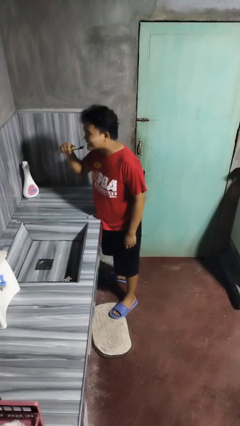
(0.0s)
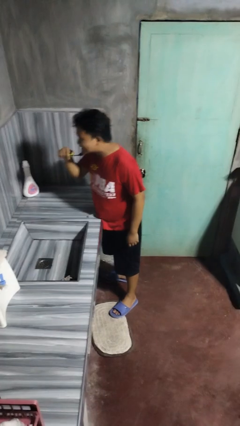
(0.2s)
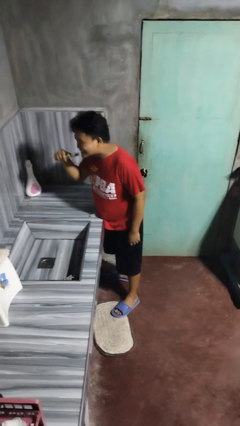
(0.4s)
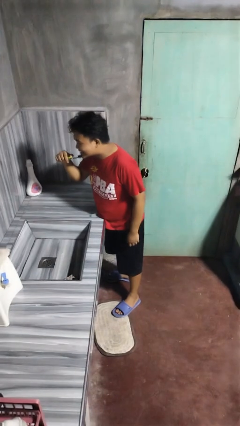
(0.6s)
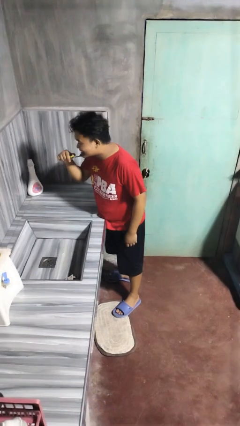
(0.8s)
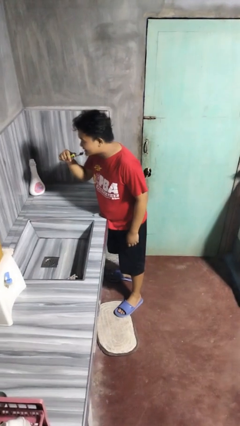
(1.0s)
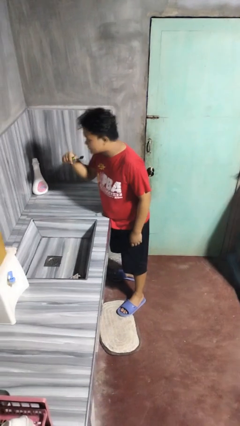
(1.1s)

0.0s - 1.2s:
person brushes teeth

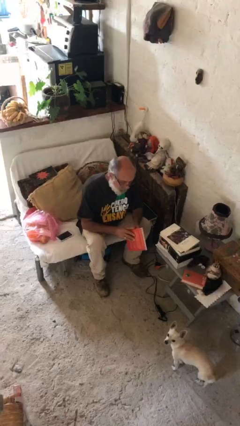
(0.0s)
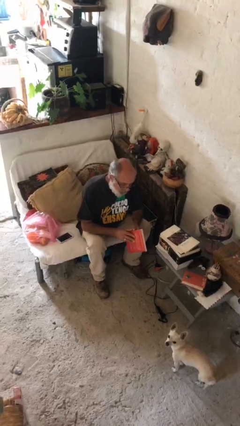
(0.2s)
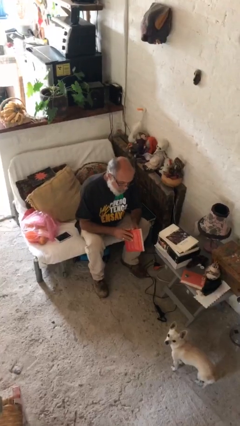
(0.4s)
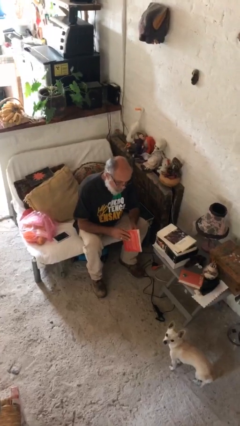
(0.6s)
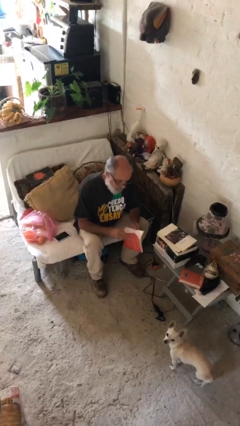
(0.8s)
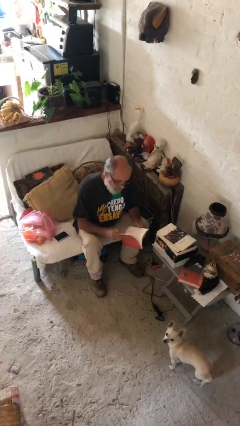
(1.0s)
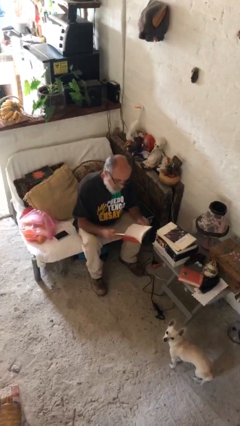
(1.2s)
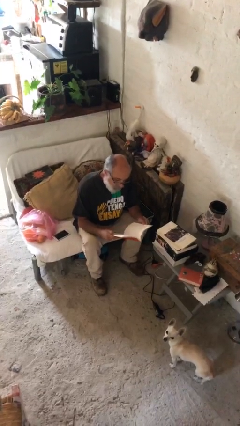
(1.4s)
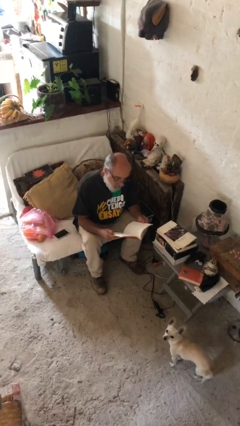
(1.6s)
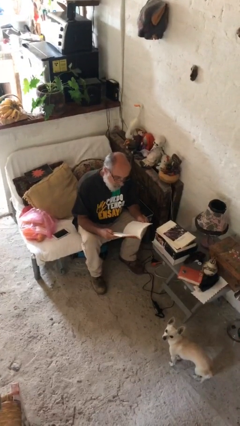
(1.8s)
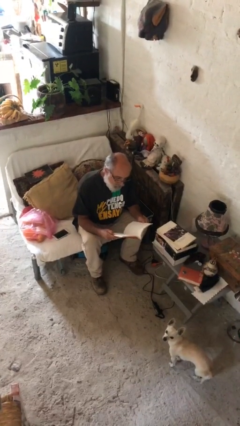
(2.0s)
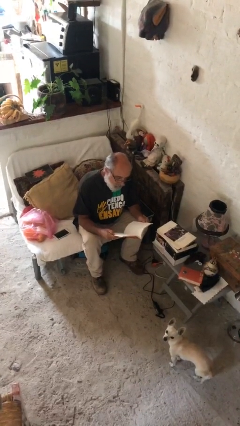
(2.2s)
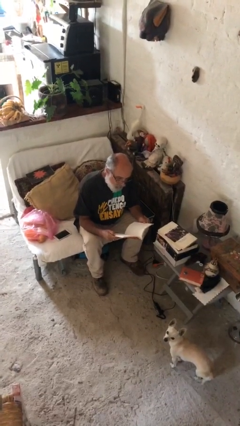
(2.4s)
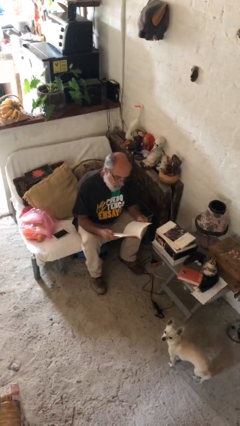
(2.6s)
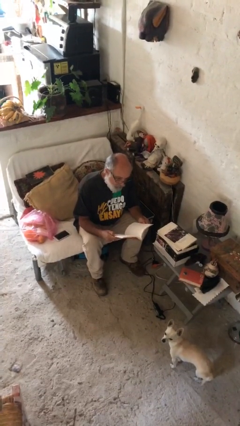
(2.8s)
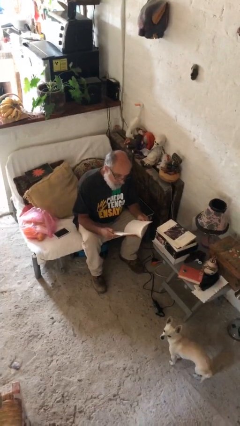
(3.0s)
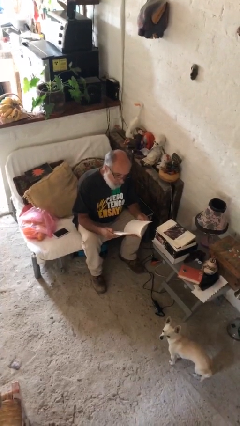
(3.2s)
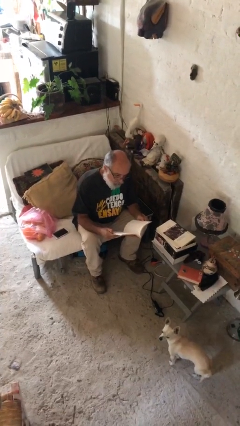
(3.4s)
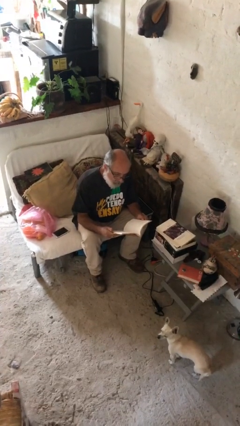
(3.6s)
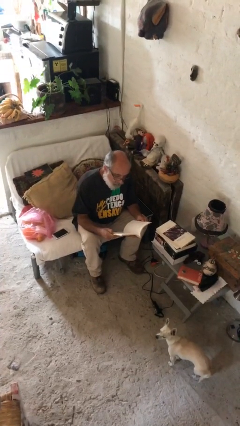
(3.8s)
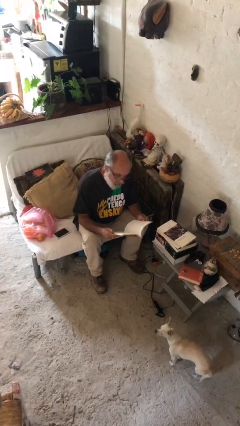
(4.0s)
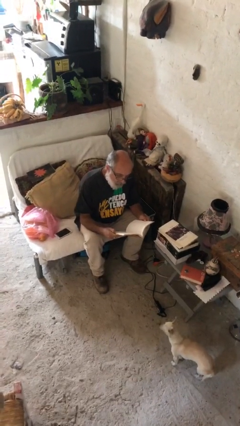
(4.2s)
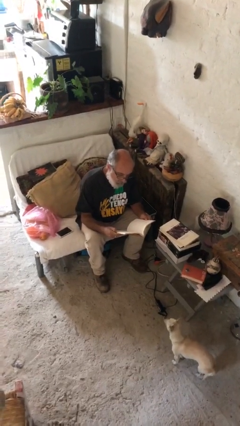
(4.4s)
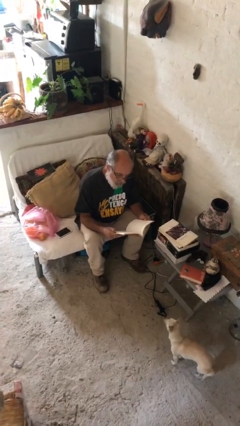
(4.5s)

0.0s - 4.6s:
person reads document

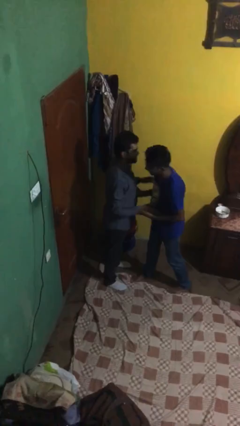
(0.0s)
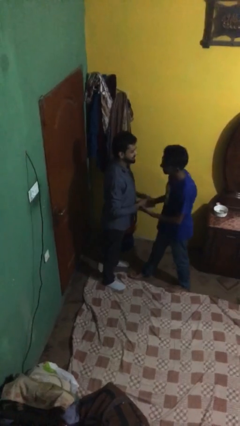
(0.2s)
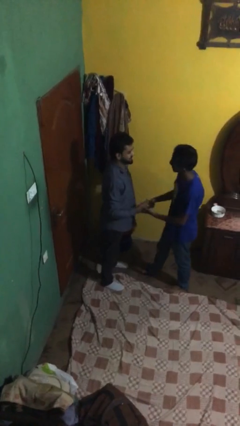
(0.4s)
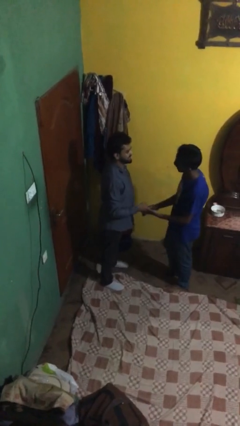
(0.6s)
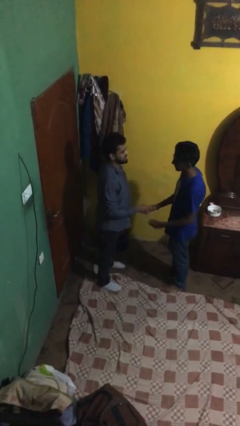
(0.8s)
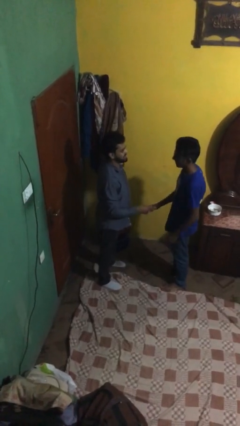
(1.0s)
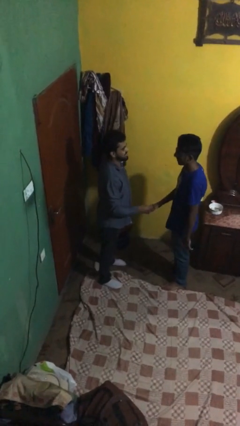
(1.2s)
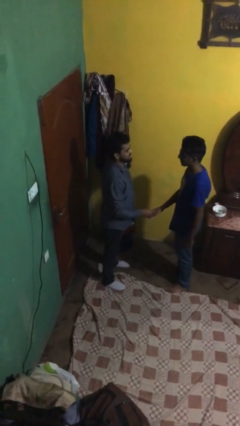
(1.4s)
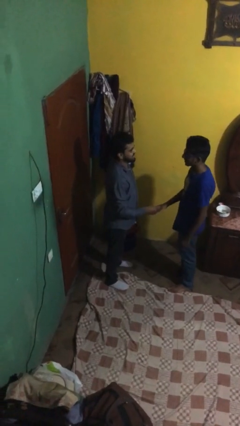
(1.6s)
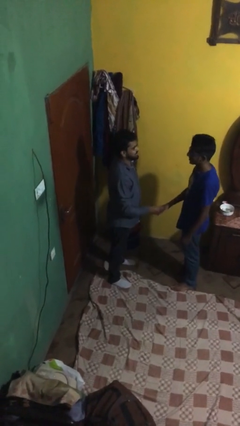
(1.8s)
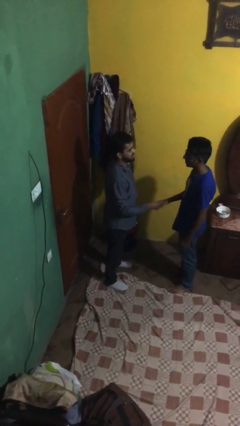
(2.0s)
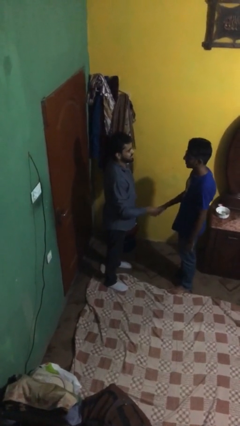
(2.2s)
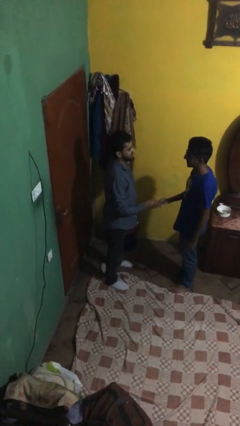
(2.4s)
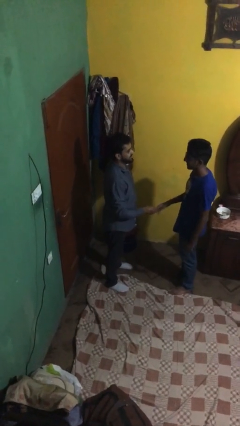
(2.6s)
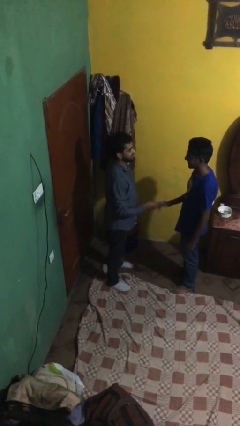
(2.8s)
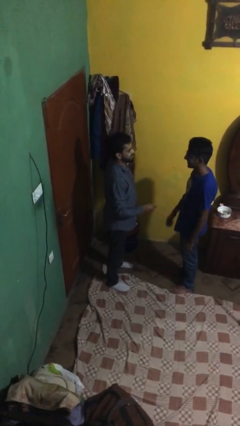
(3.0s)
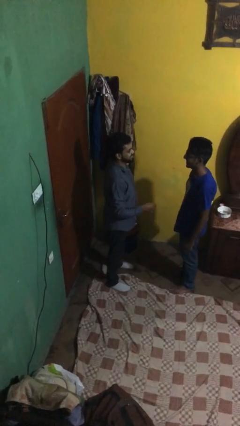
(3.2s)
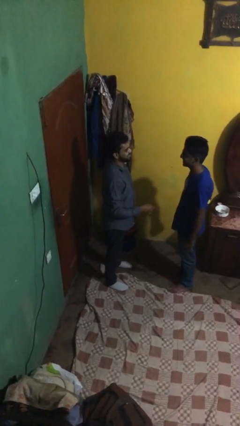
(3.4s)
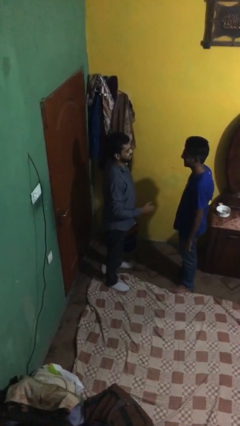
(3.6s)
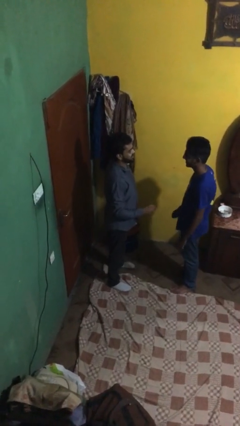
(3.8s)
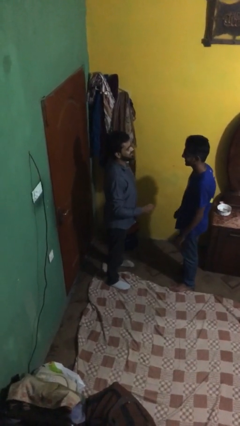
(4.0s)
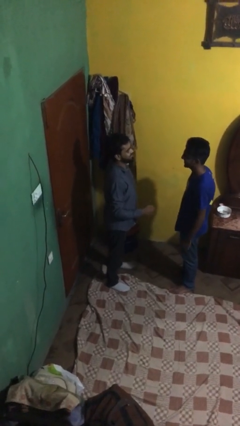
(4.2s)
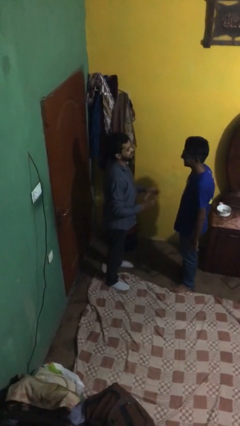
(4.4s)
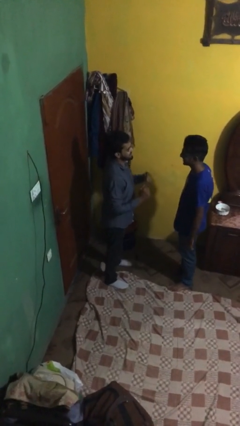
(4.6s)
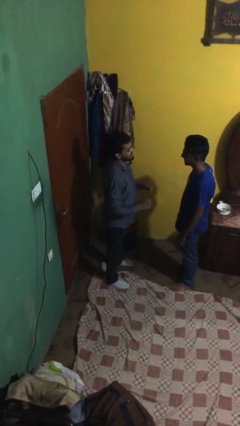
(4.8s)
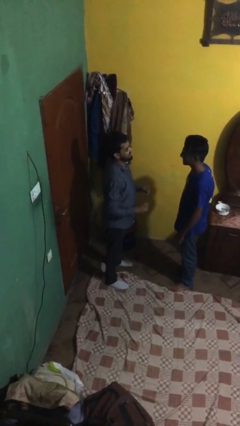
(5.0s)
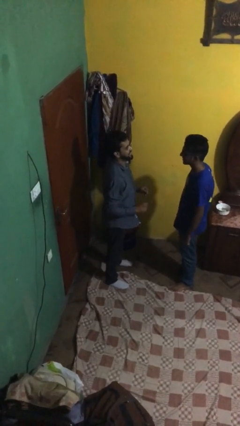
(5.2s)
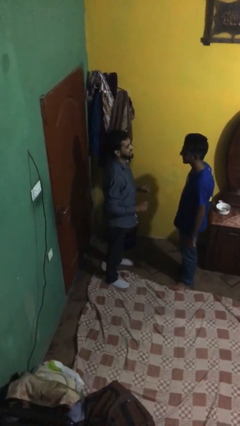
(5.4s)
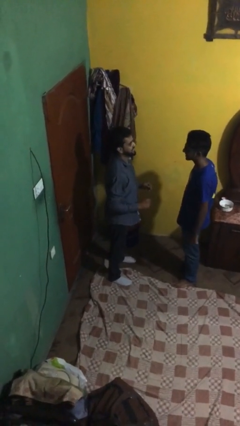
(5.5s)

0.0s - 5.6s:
person talks to person

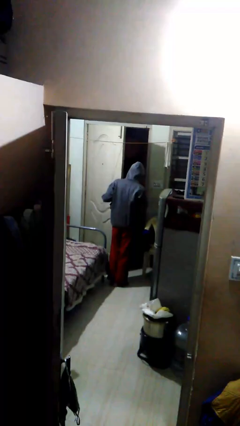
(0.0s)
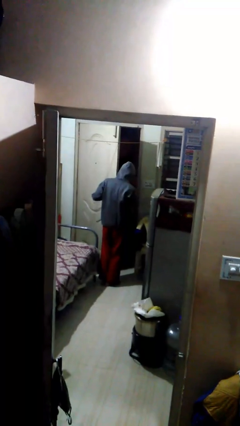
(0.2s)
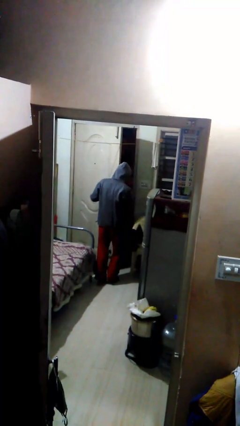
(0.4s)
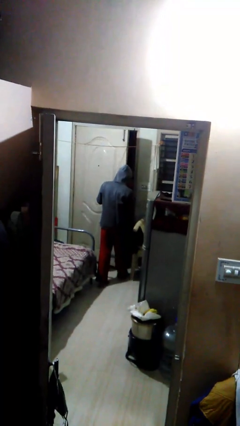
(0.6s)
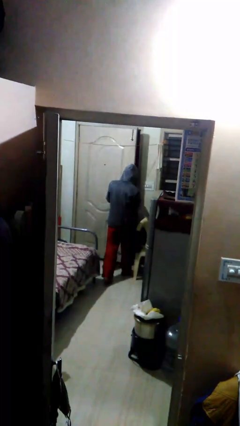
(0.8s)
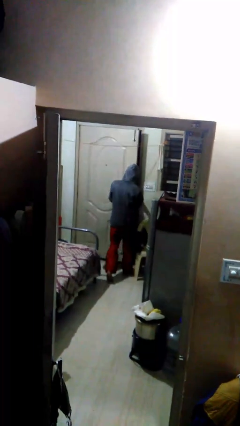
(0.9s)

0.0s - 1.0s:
person opens facility door

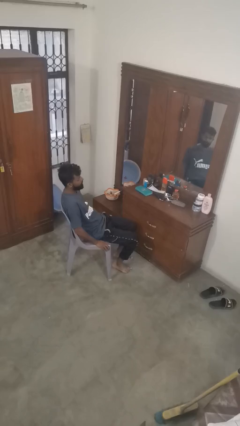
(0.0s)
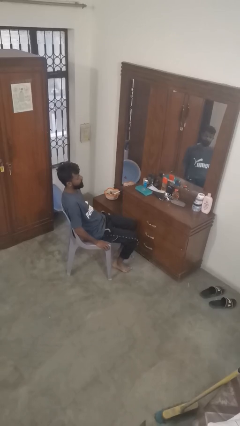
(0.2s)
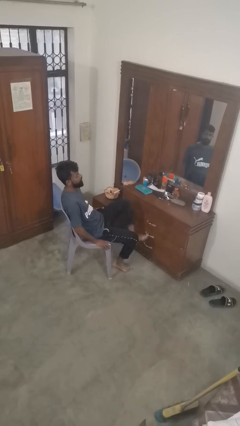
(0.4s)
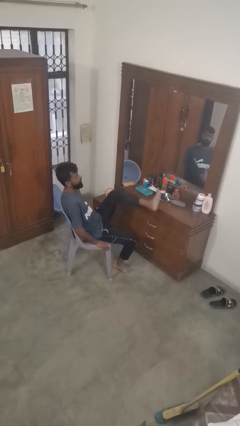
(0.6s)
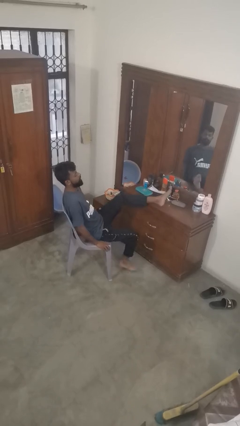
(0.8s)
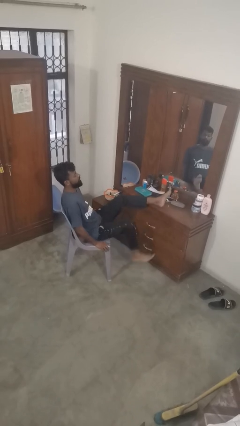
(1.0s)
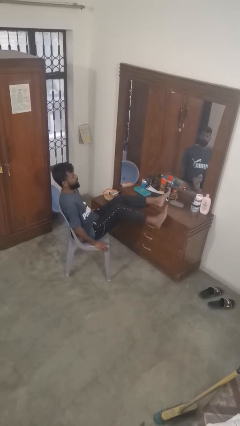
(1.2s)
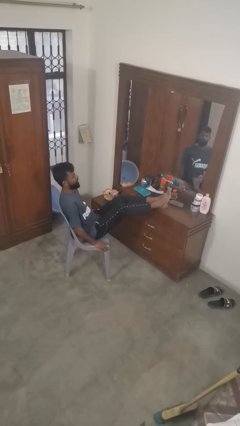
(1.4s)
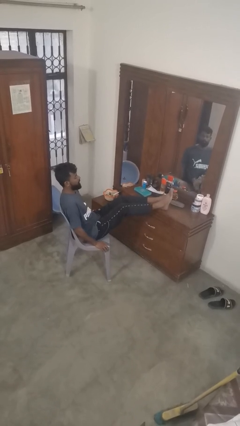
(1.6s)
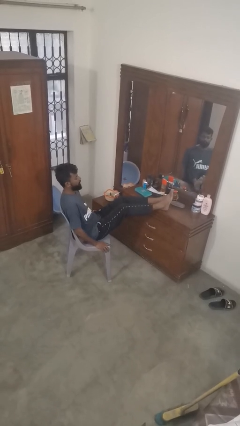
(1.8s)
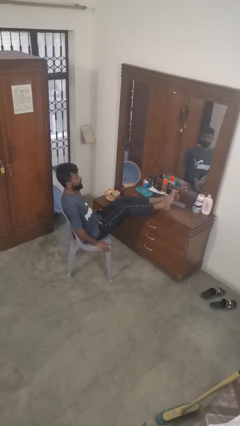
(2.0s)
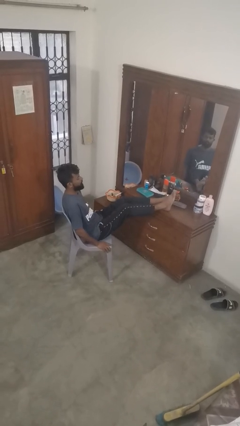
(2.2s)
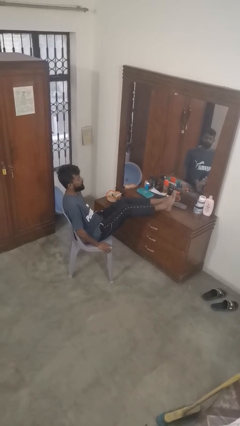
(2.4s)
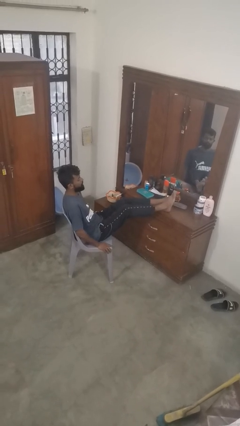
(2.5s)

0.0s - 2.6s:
person puts feet up

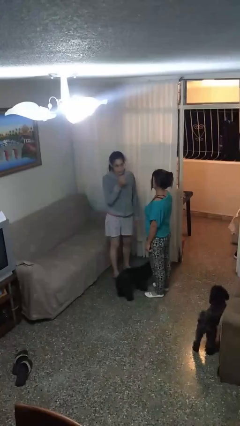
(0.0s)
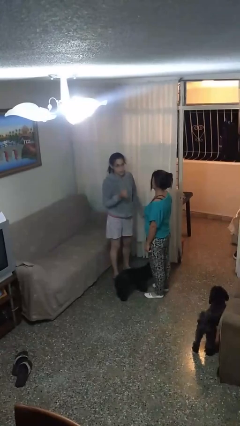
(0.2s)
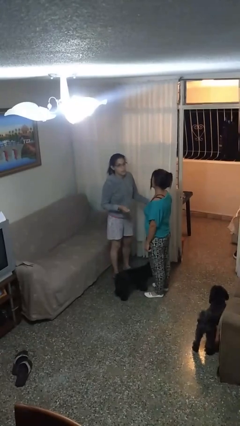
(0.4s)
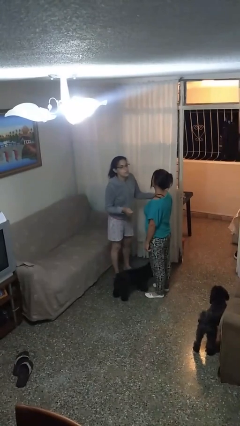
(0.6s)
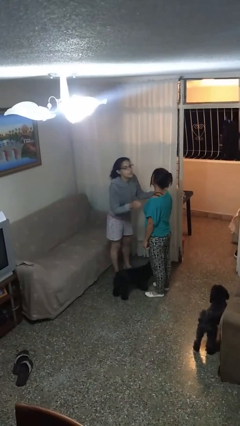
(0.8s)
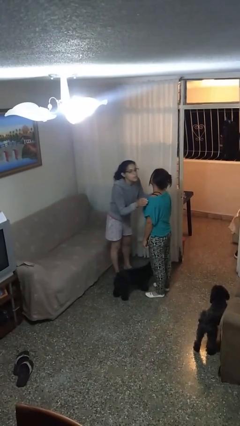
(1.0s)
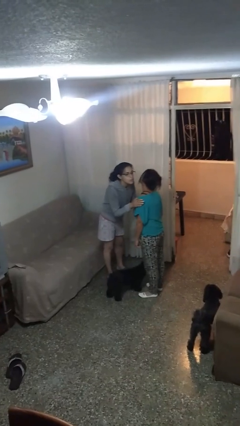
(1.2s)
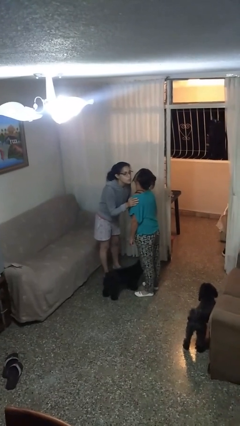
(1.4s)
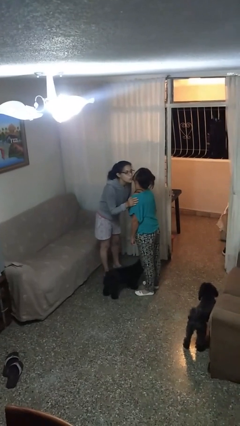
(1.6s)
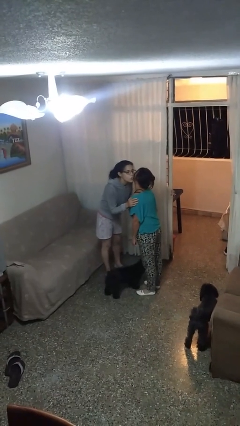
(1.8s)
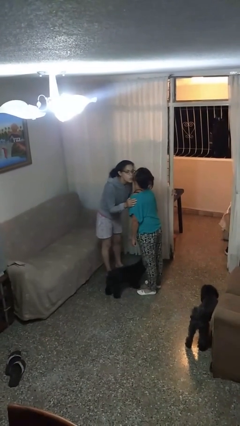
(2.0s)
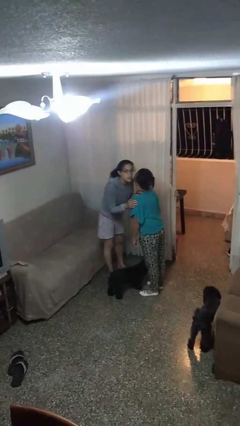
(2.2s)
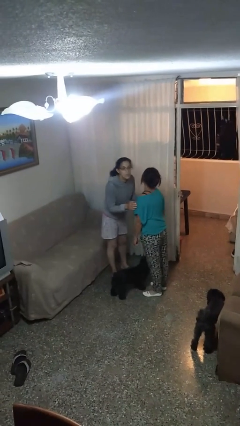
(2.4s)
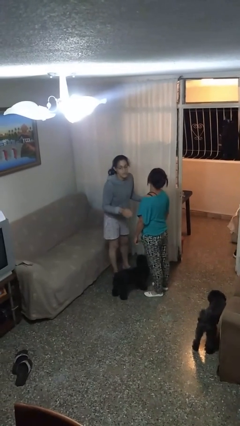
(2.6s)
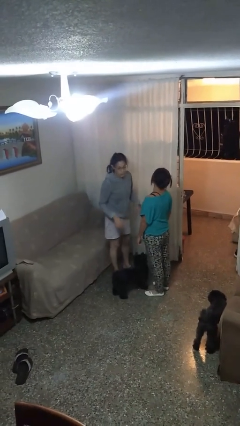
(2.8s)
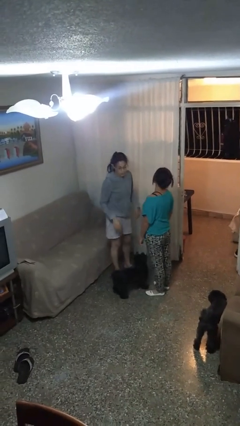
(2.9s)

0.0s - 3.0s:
person kisses cheek of person
